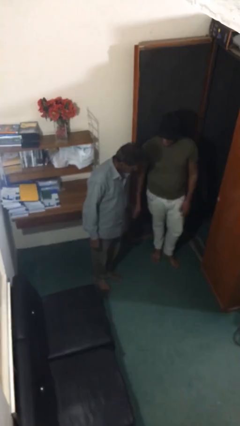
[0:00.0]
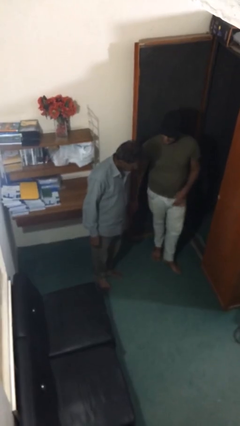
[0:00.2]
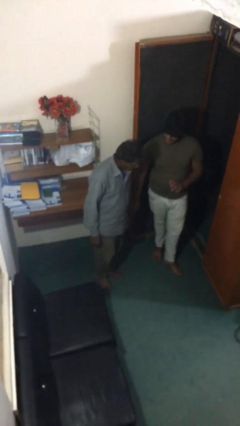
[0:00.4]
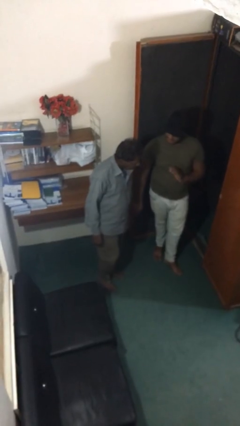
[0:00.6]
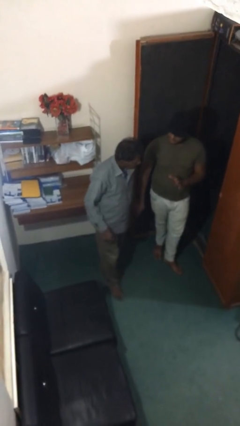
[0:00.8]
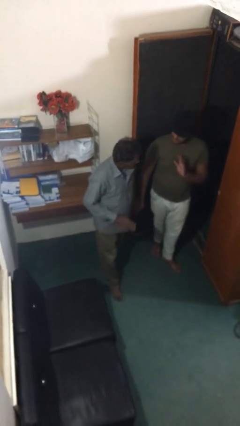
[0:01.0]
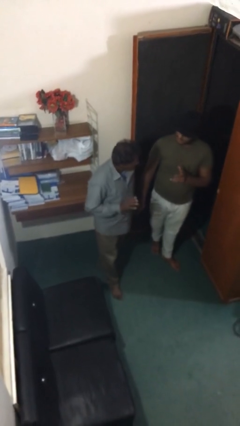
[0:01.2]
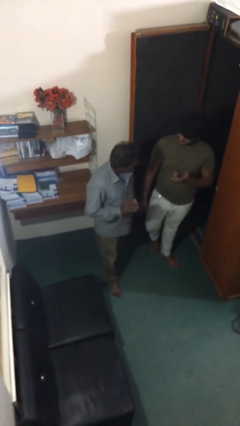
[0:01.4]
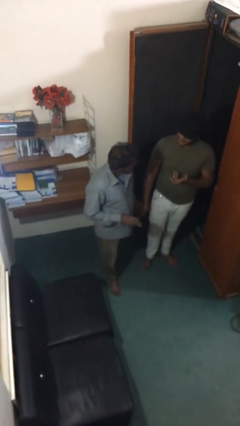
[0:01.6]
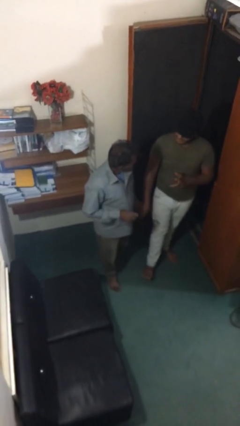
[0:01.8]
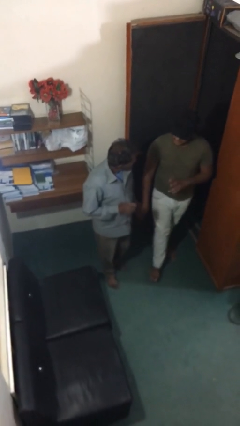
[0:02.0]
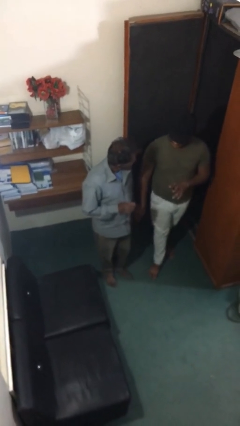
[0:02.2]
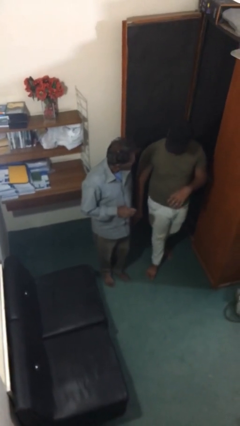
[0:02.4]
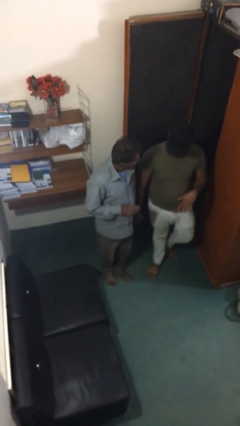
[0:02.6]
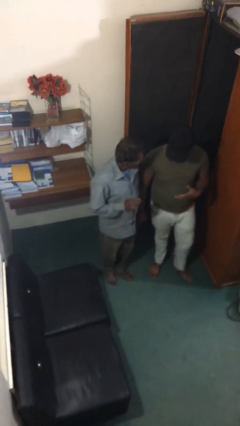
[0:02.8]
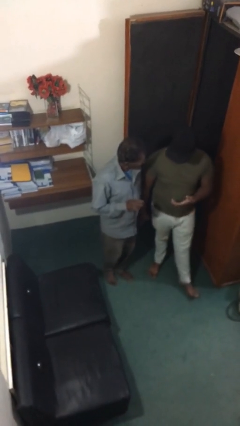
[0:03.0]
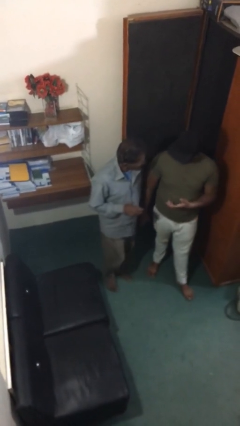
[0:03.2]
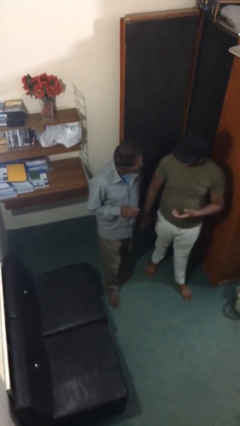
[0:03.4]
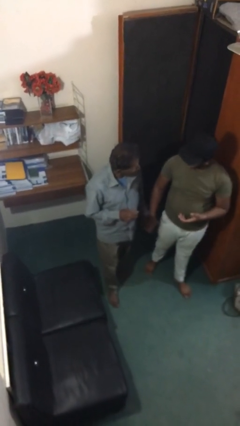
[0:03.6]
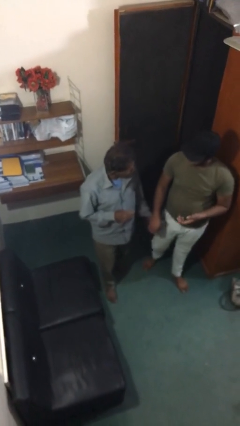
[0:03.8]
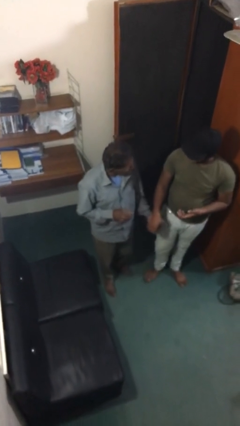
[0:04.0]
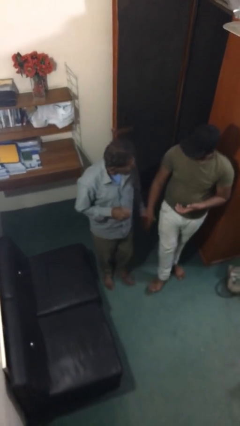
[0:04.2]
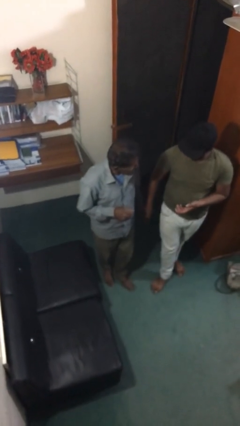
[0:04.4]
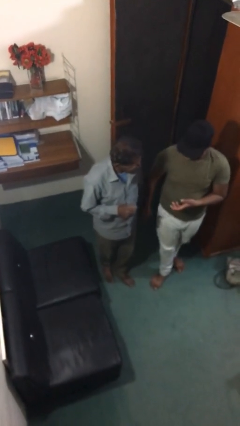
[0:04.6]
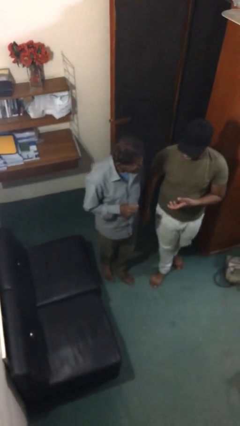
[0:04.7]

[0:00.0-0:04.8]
person holds hand

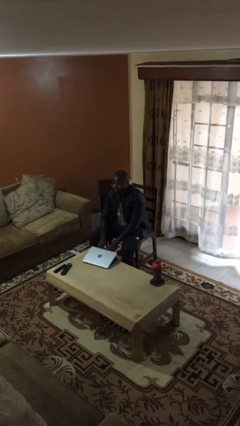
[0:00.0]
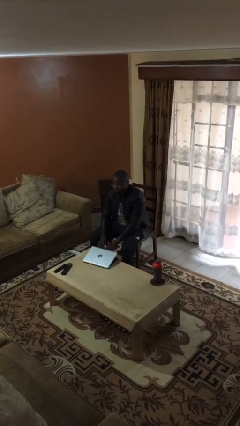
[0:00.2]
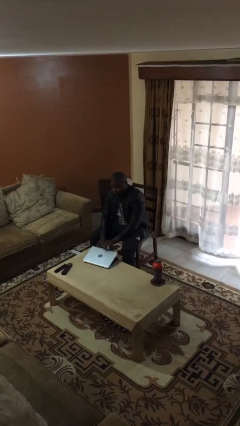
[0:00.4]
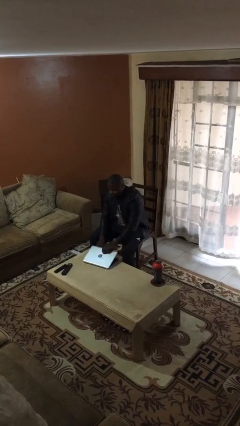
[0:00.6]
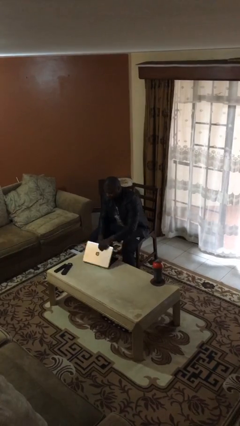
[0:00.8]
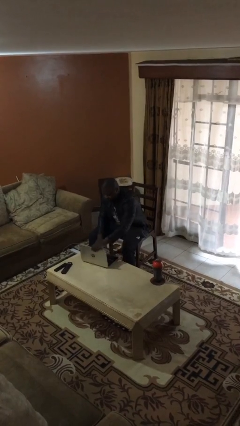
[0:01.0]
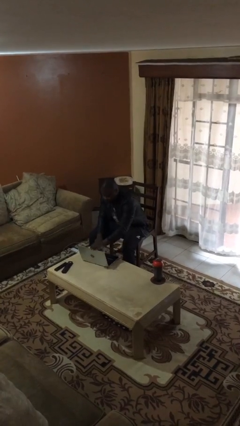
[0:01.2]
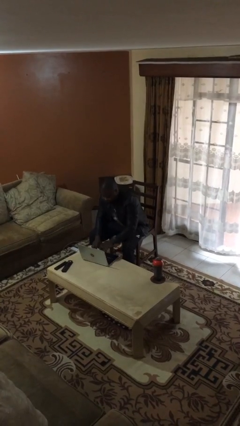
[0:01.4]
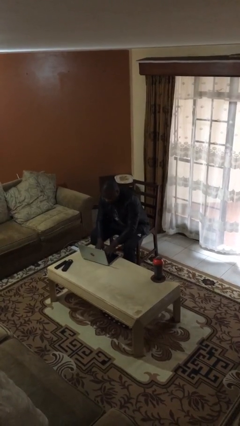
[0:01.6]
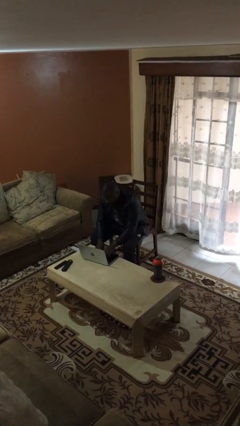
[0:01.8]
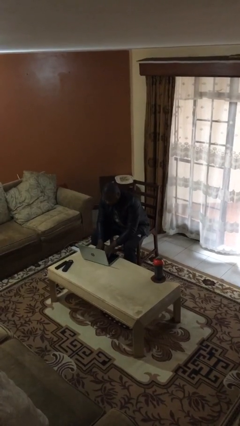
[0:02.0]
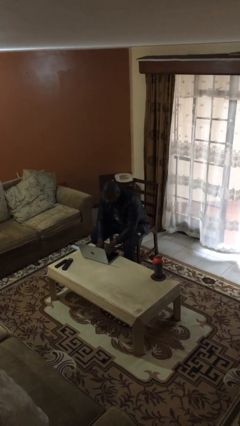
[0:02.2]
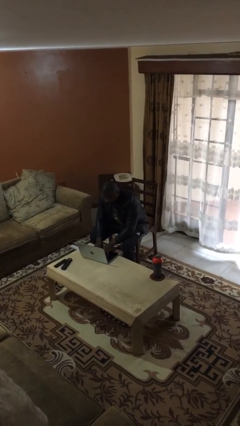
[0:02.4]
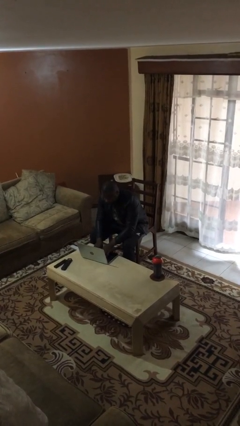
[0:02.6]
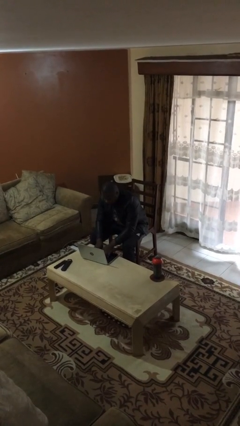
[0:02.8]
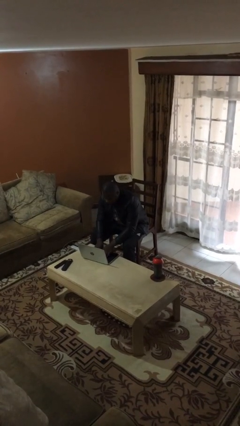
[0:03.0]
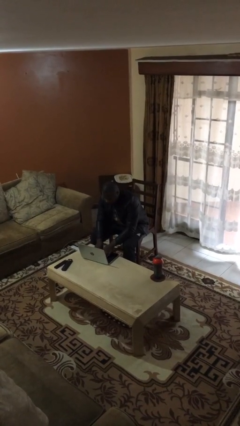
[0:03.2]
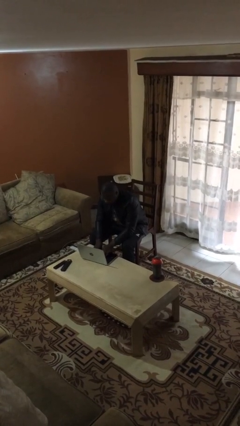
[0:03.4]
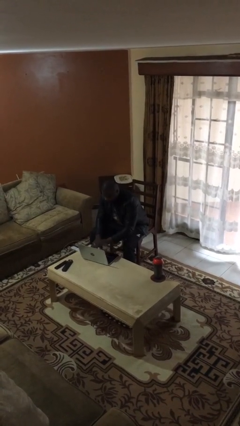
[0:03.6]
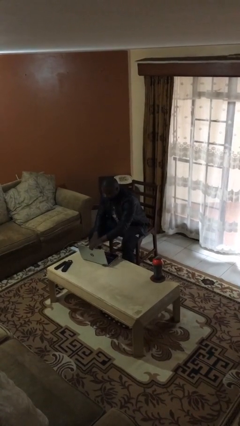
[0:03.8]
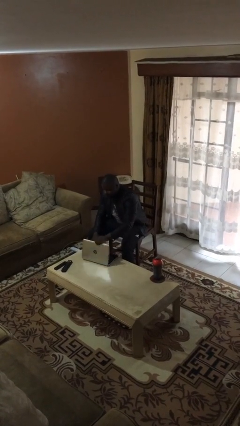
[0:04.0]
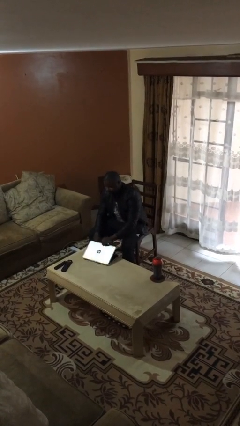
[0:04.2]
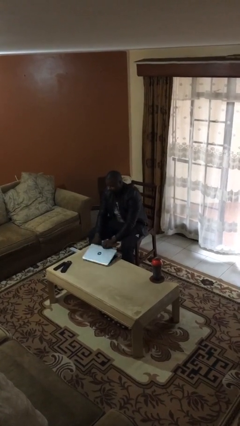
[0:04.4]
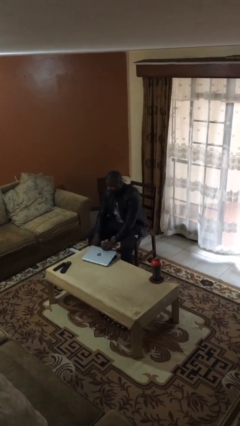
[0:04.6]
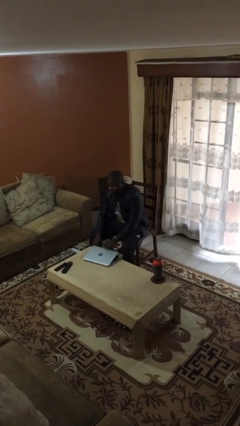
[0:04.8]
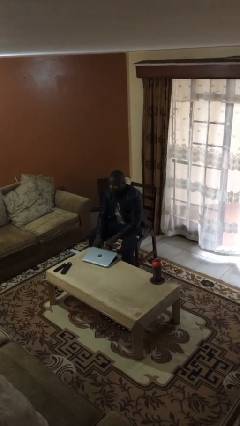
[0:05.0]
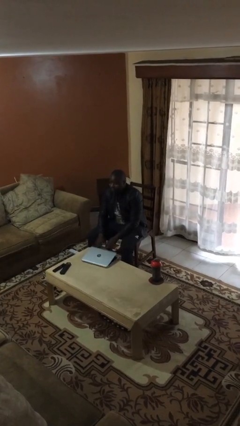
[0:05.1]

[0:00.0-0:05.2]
person interacts with laptop

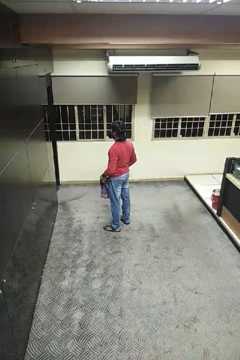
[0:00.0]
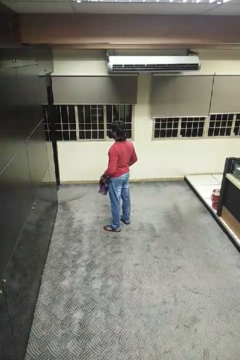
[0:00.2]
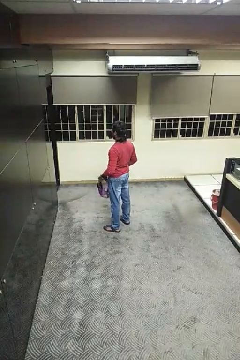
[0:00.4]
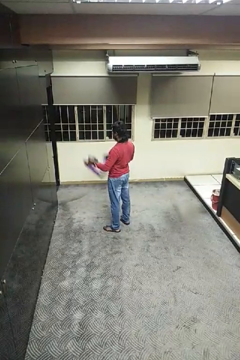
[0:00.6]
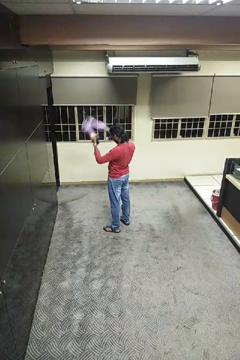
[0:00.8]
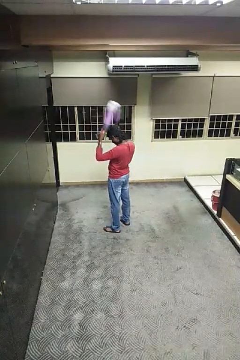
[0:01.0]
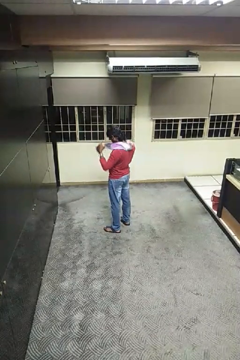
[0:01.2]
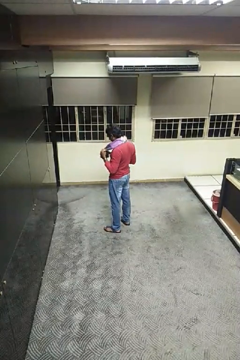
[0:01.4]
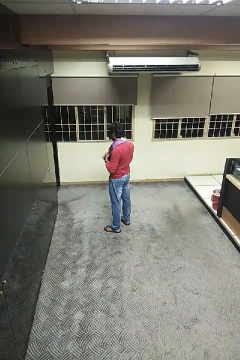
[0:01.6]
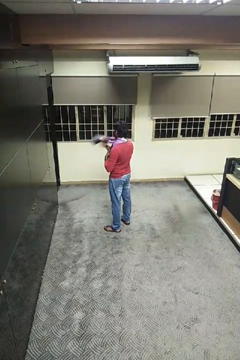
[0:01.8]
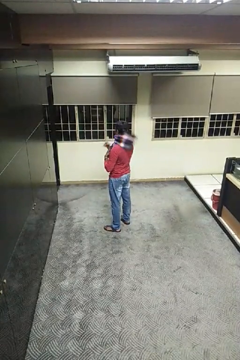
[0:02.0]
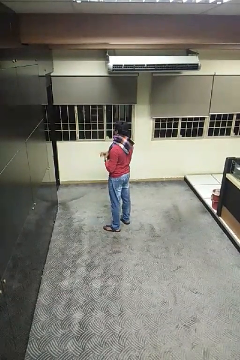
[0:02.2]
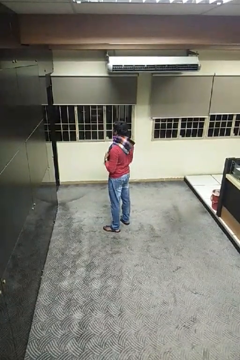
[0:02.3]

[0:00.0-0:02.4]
person puts on scarf

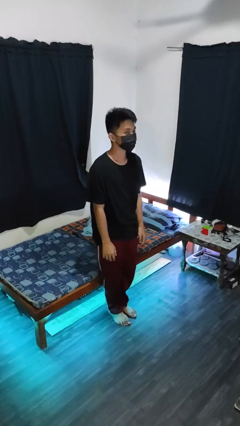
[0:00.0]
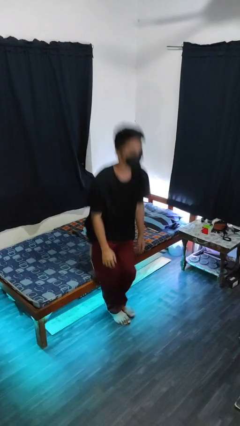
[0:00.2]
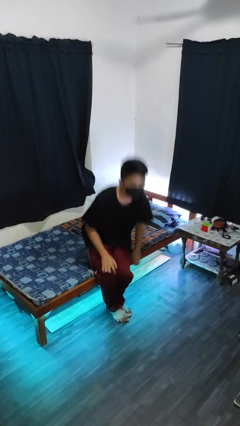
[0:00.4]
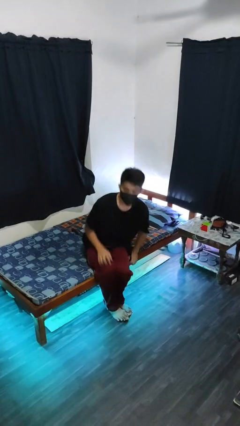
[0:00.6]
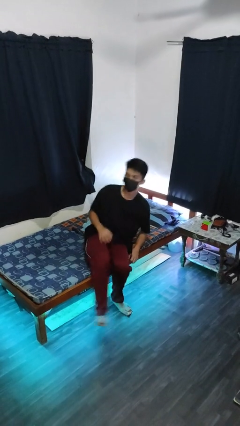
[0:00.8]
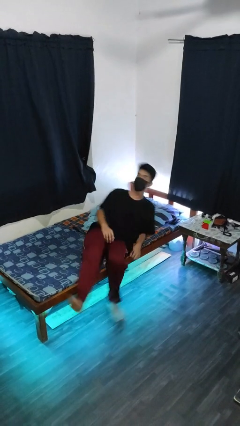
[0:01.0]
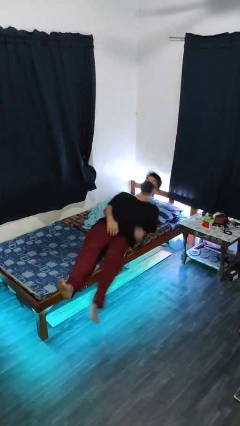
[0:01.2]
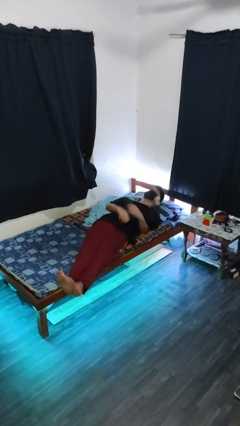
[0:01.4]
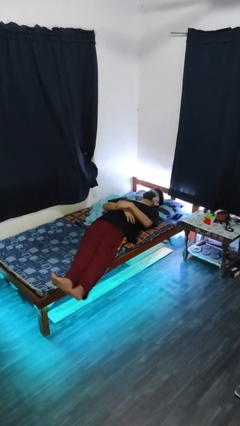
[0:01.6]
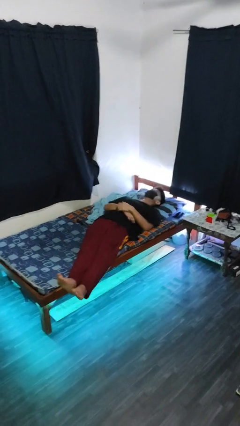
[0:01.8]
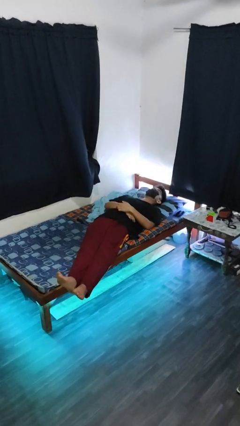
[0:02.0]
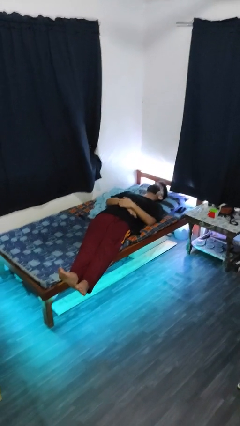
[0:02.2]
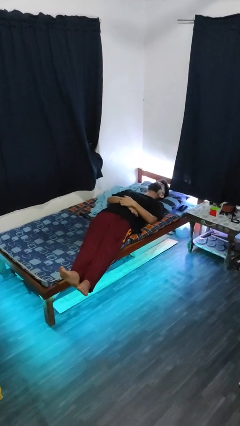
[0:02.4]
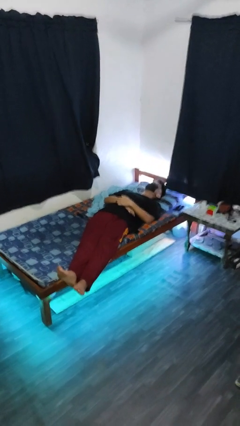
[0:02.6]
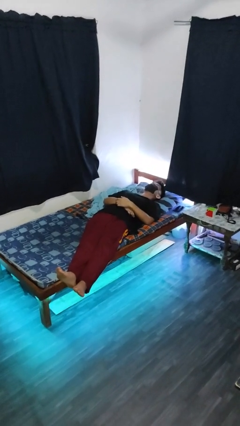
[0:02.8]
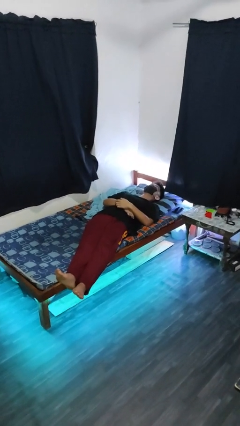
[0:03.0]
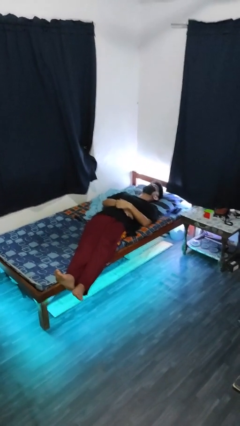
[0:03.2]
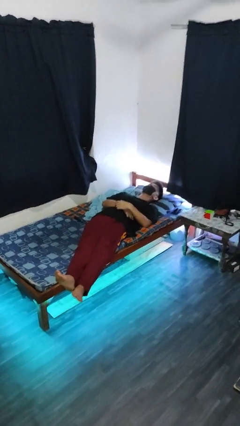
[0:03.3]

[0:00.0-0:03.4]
person lies down on bed

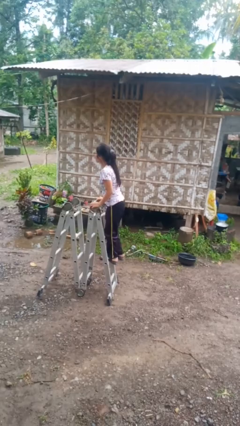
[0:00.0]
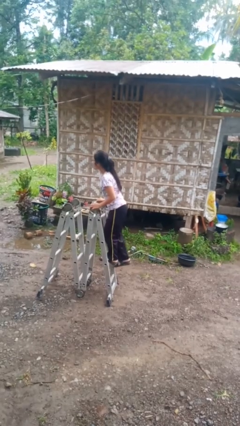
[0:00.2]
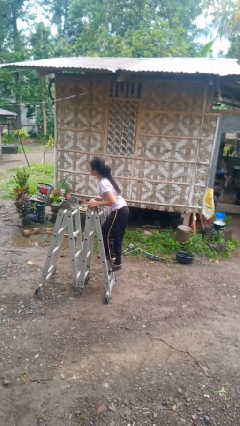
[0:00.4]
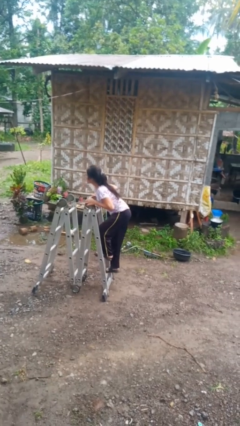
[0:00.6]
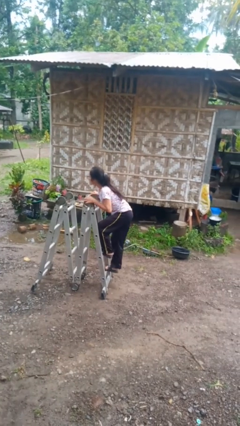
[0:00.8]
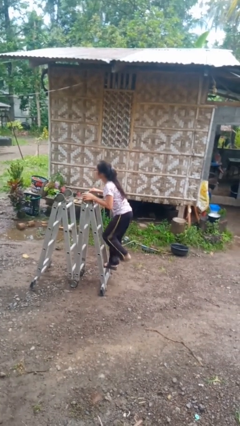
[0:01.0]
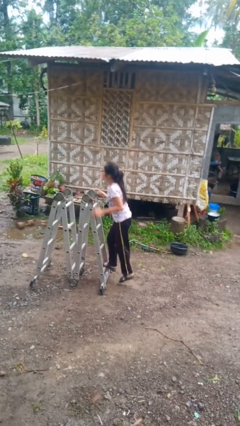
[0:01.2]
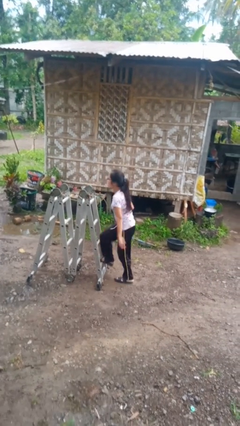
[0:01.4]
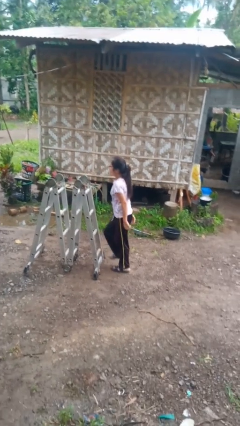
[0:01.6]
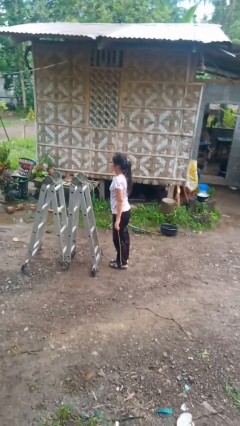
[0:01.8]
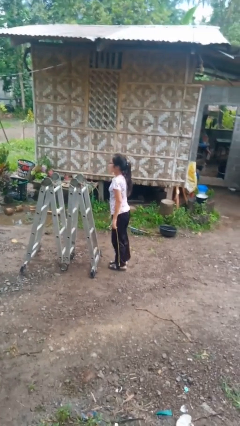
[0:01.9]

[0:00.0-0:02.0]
person climbs down ladder
